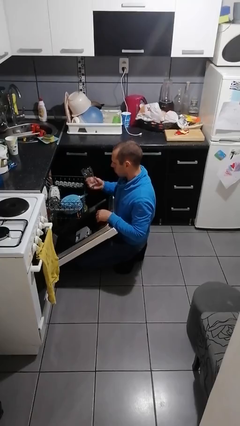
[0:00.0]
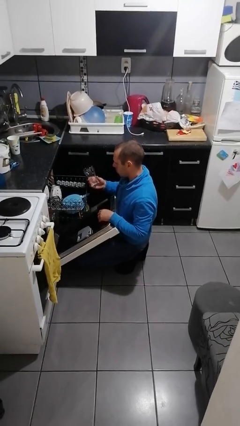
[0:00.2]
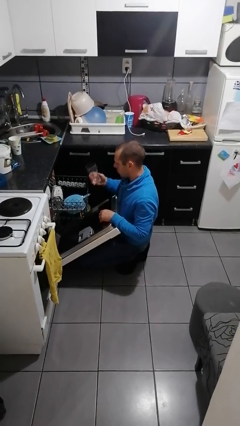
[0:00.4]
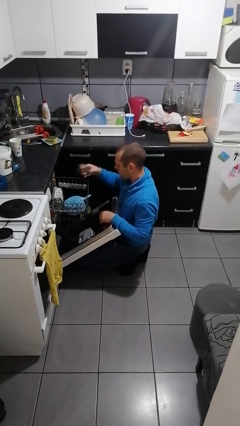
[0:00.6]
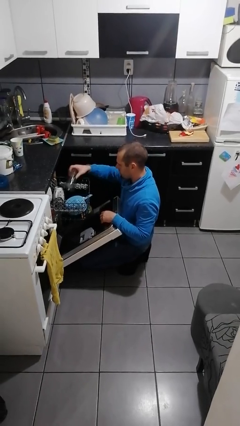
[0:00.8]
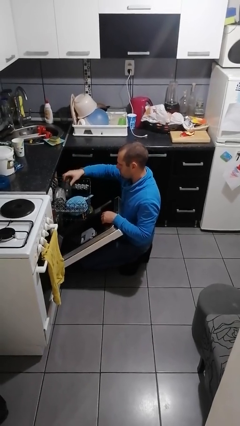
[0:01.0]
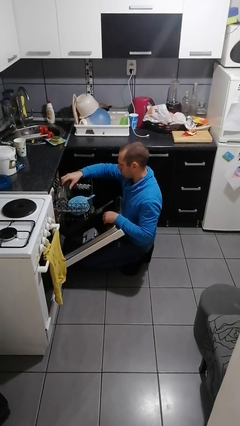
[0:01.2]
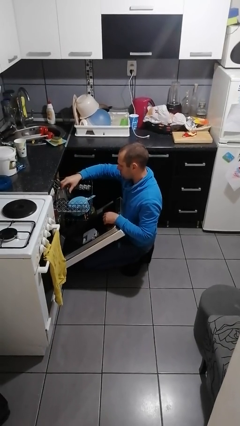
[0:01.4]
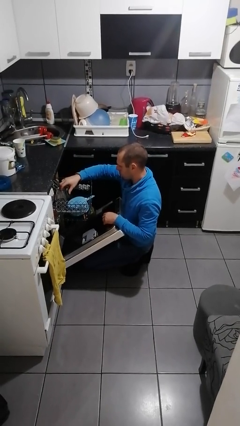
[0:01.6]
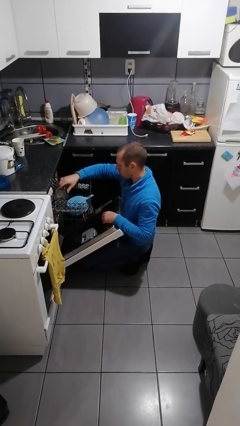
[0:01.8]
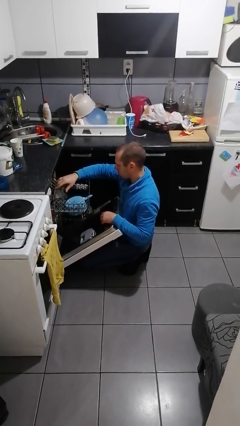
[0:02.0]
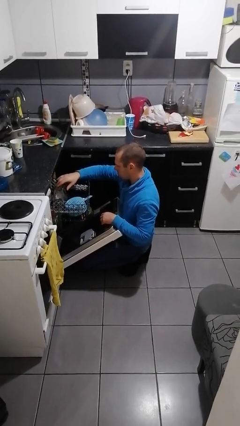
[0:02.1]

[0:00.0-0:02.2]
person loads dishwasher

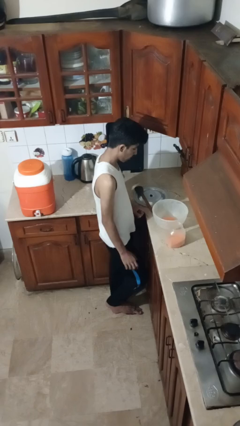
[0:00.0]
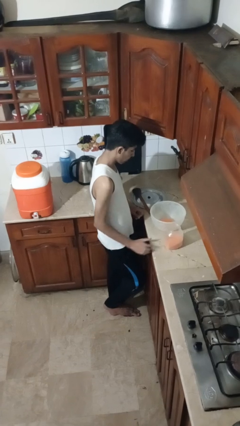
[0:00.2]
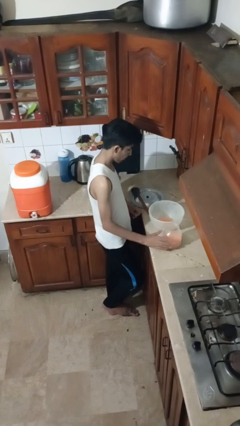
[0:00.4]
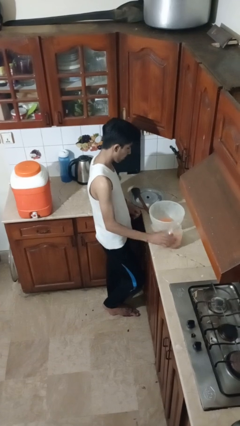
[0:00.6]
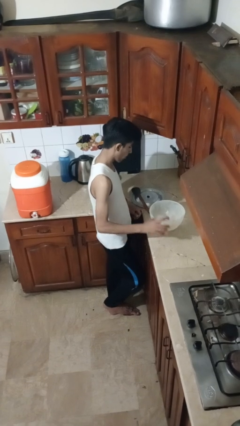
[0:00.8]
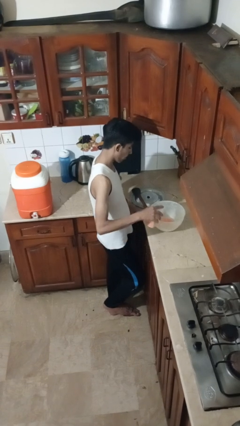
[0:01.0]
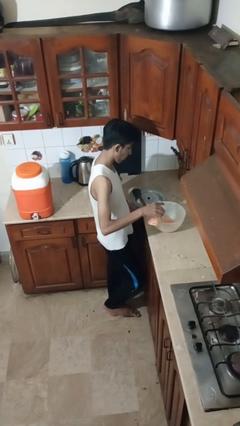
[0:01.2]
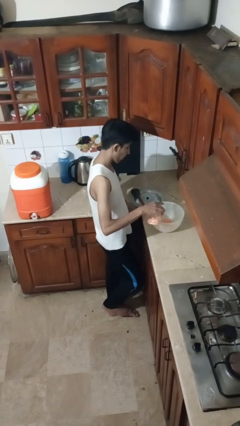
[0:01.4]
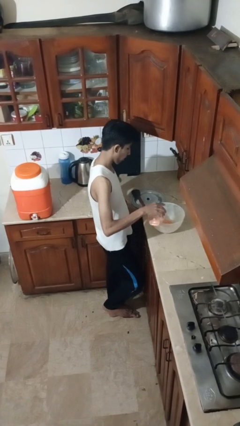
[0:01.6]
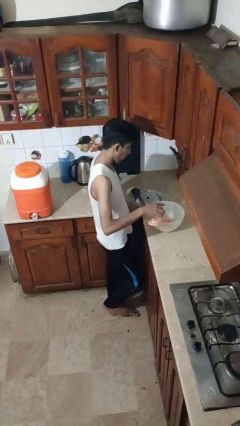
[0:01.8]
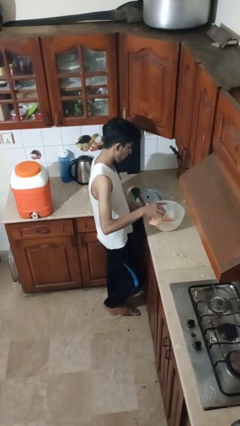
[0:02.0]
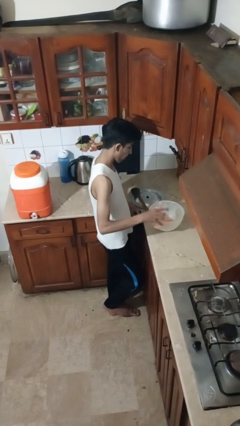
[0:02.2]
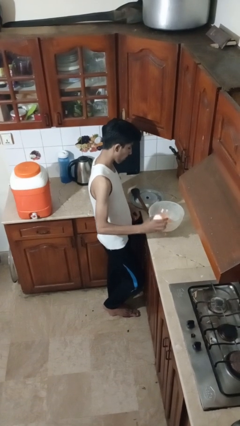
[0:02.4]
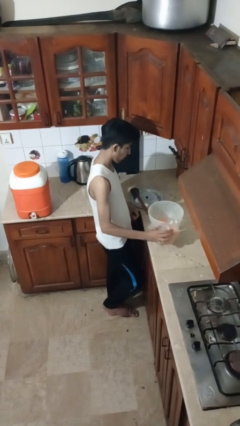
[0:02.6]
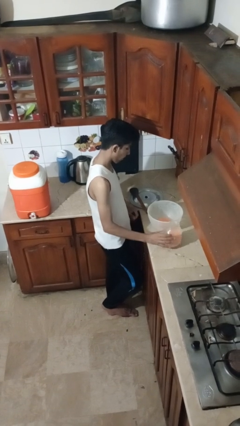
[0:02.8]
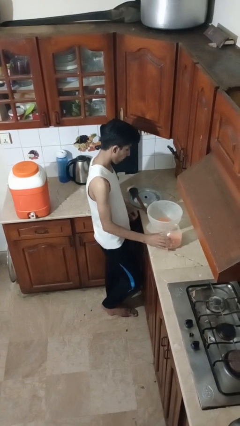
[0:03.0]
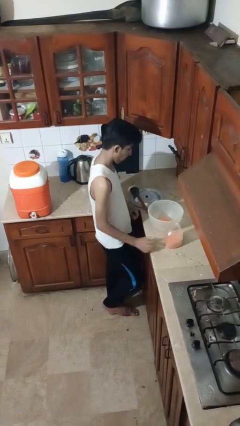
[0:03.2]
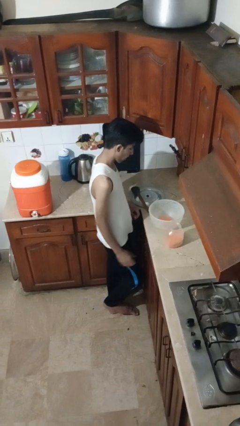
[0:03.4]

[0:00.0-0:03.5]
person pours into bowl

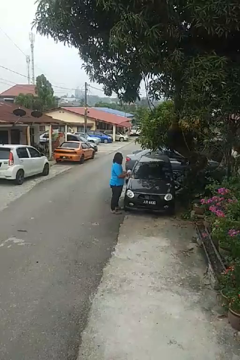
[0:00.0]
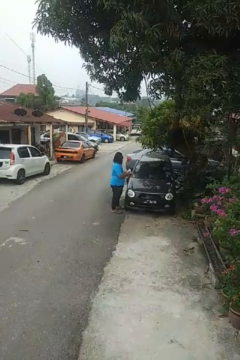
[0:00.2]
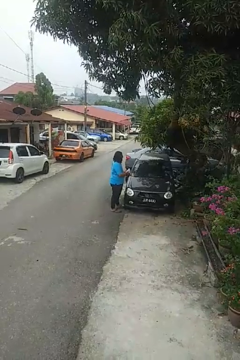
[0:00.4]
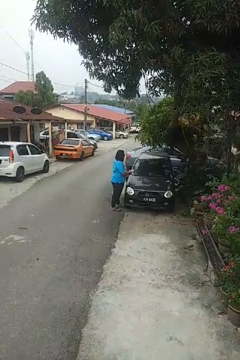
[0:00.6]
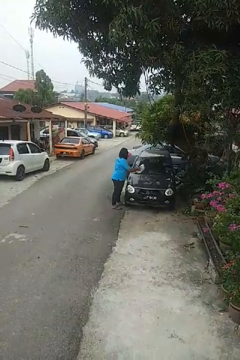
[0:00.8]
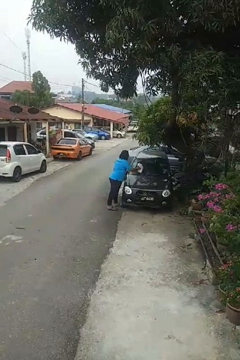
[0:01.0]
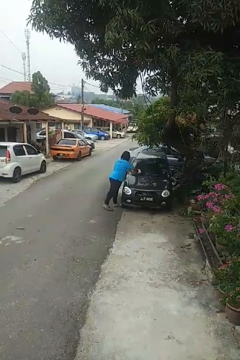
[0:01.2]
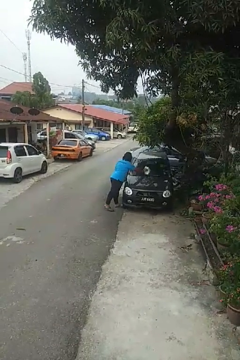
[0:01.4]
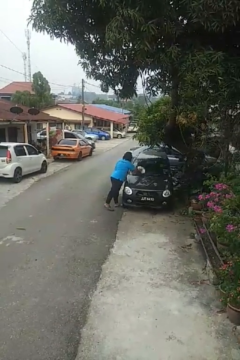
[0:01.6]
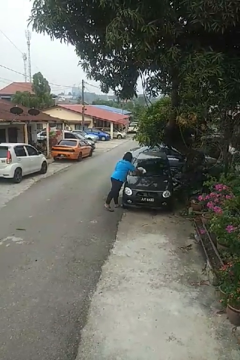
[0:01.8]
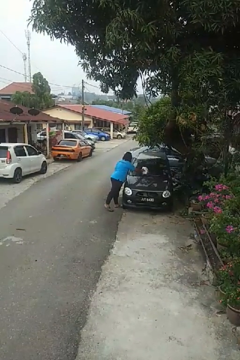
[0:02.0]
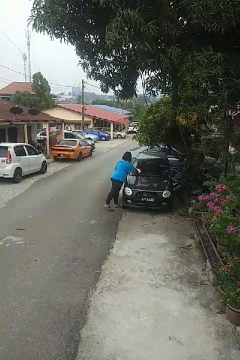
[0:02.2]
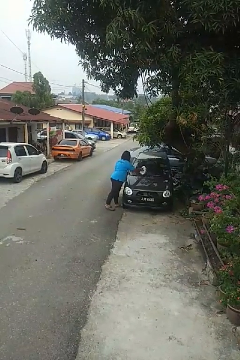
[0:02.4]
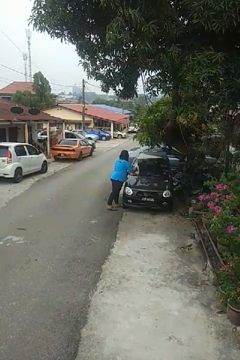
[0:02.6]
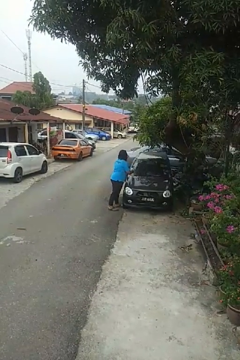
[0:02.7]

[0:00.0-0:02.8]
person polishes car with rag

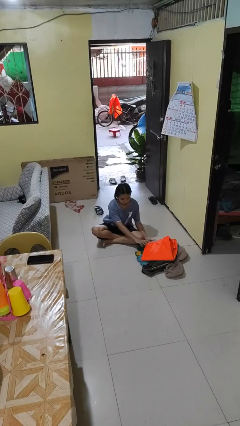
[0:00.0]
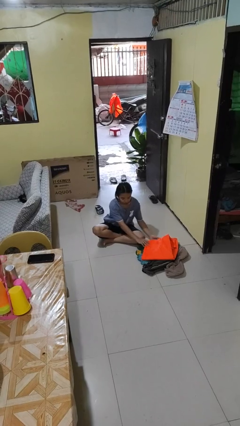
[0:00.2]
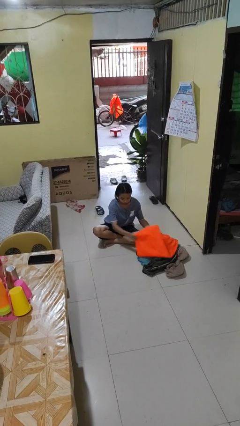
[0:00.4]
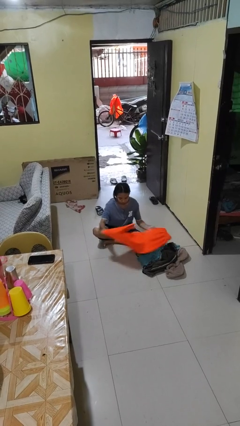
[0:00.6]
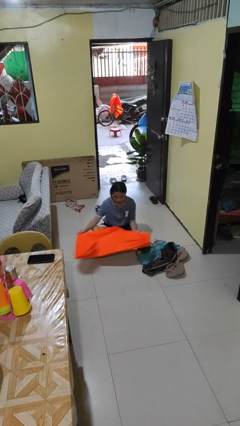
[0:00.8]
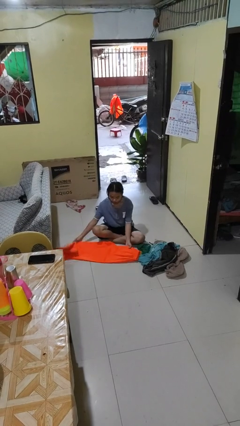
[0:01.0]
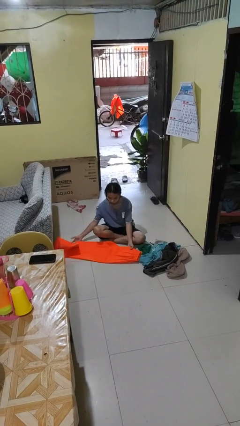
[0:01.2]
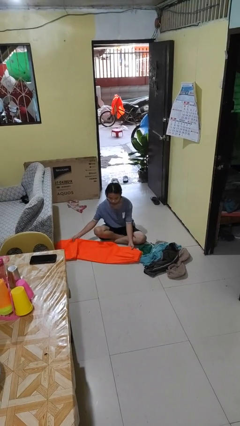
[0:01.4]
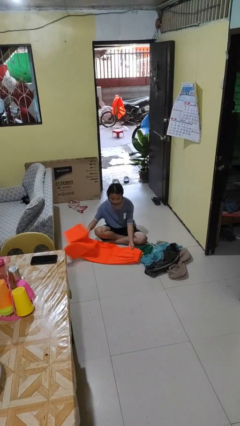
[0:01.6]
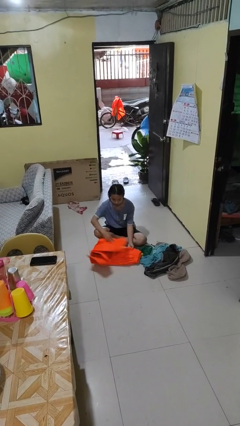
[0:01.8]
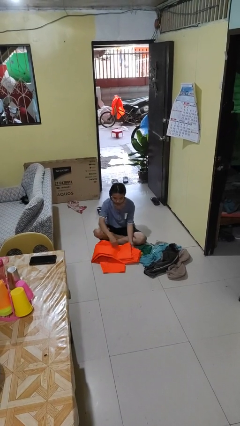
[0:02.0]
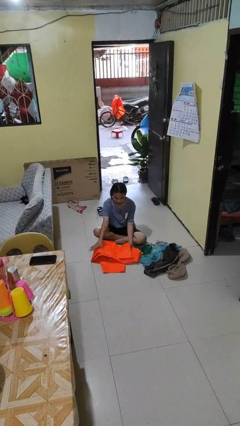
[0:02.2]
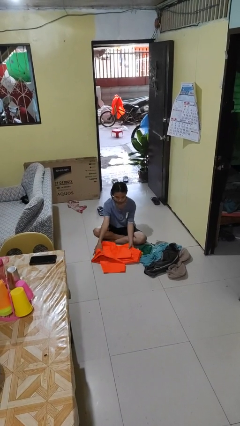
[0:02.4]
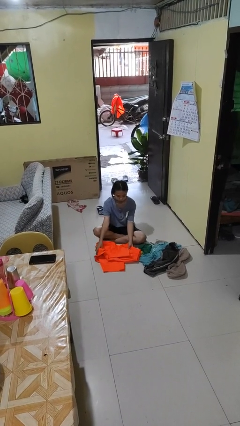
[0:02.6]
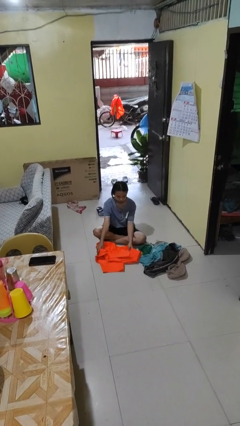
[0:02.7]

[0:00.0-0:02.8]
person folds pants

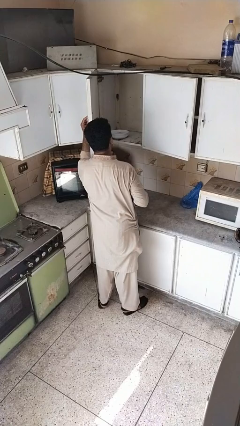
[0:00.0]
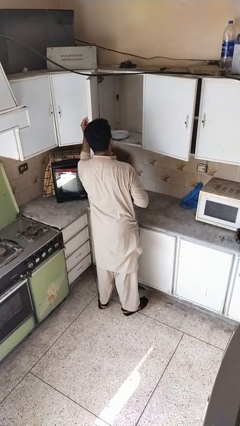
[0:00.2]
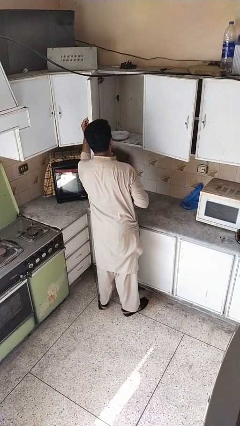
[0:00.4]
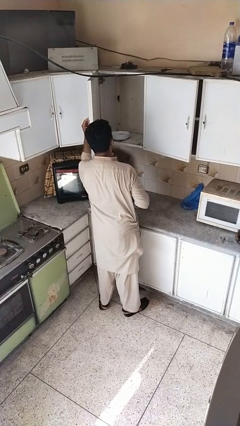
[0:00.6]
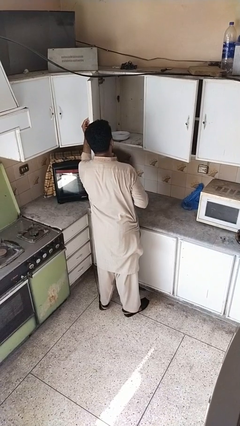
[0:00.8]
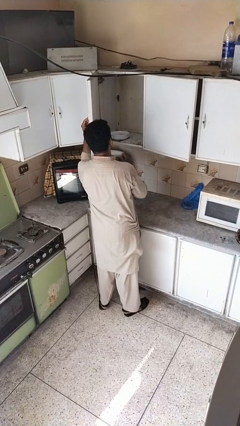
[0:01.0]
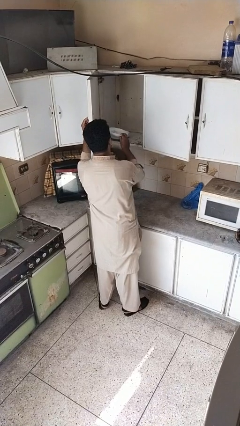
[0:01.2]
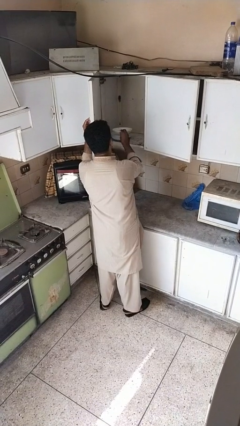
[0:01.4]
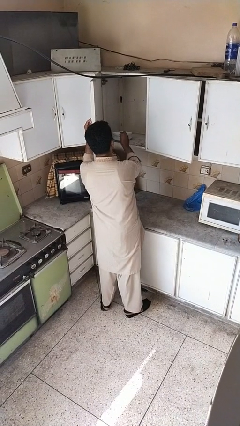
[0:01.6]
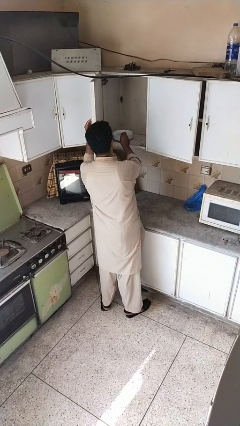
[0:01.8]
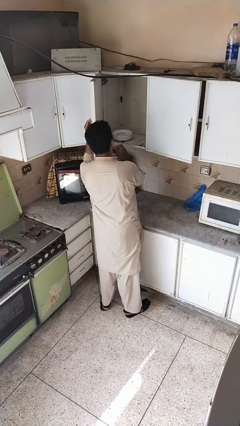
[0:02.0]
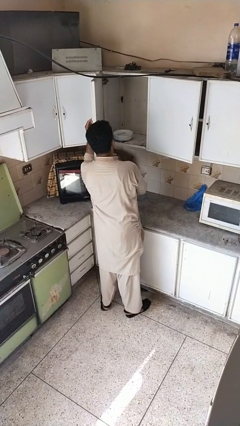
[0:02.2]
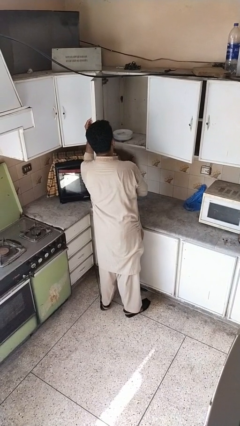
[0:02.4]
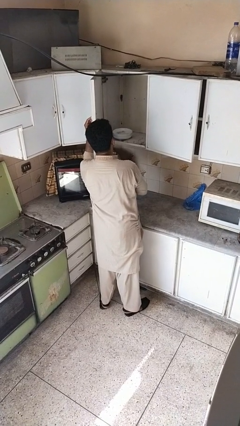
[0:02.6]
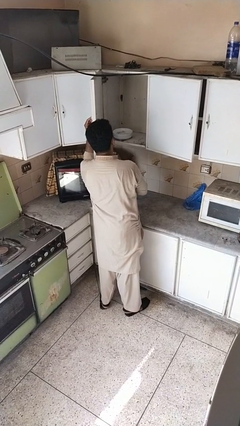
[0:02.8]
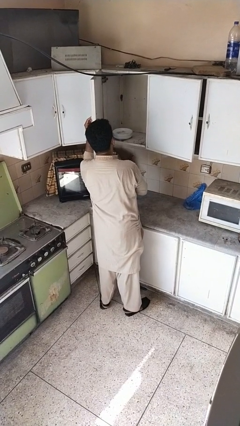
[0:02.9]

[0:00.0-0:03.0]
person puts object in cabinet

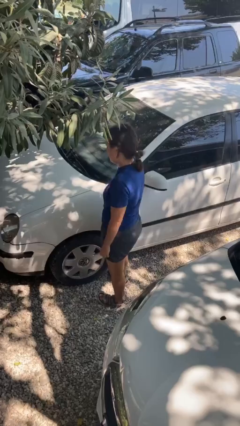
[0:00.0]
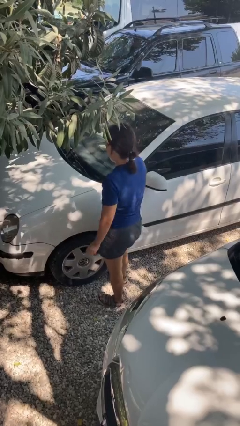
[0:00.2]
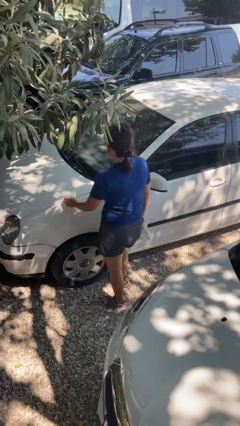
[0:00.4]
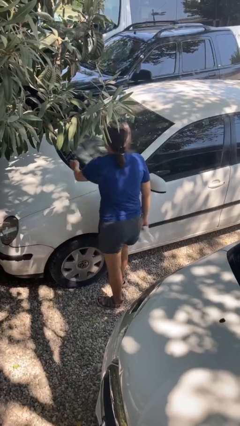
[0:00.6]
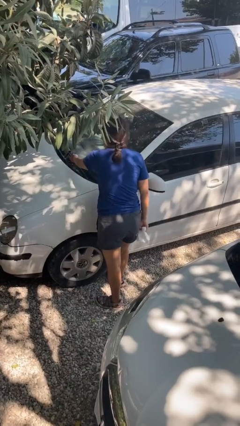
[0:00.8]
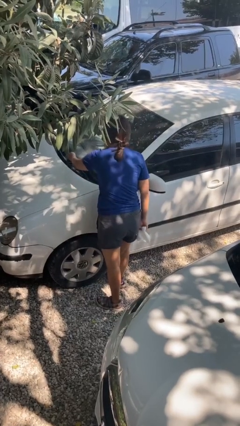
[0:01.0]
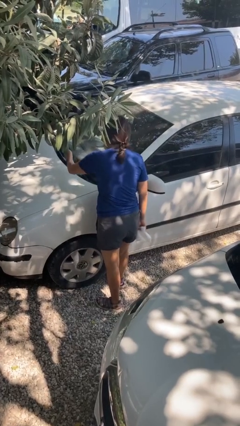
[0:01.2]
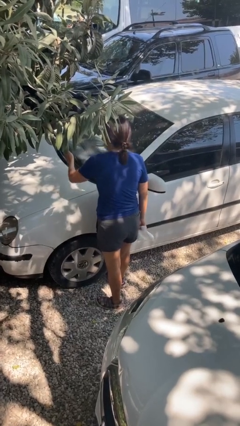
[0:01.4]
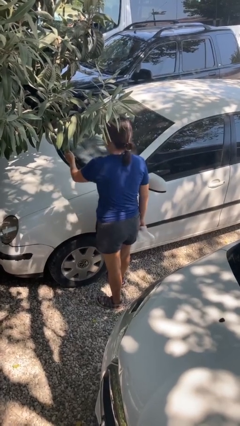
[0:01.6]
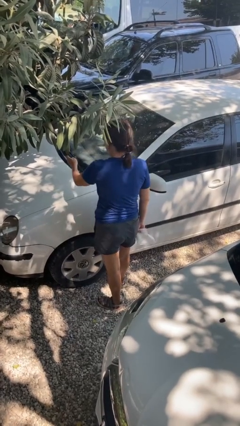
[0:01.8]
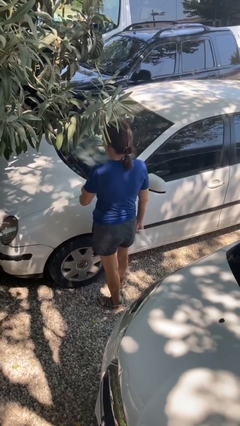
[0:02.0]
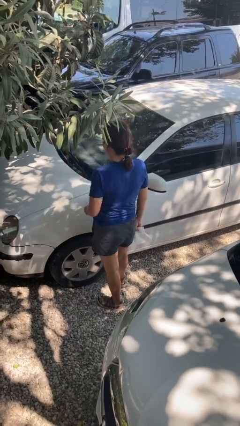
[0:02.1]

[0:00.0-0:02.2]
person flips up car wipers

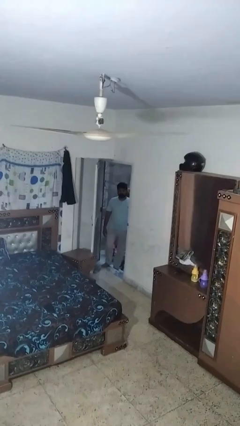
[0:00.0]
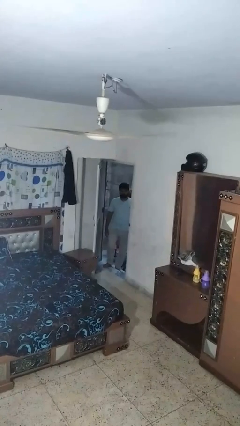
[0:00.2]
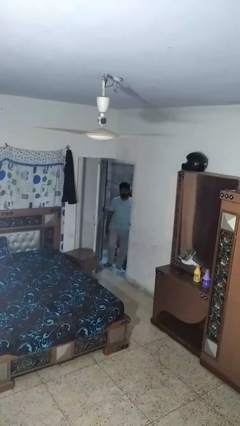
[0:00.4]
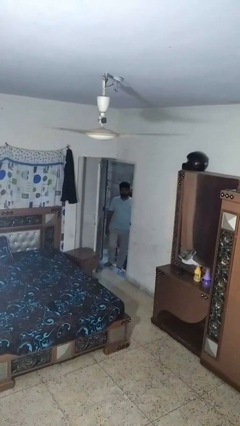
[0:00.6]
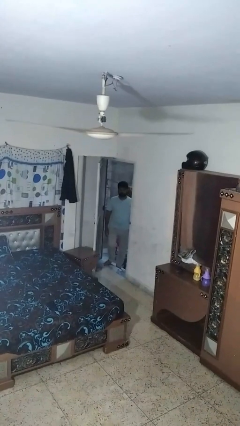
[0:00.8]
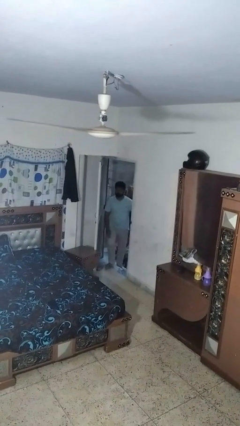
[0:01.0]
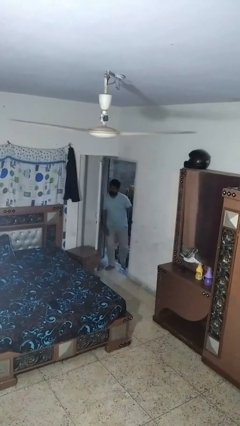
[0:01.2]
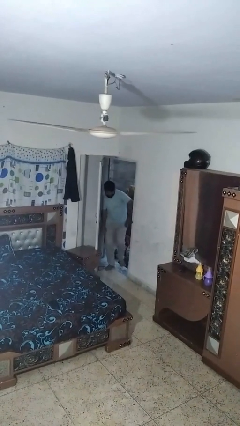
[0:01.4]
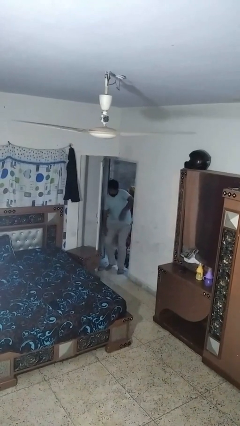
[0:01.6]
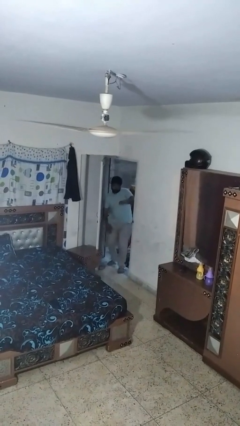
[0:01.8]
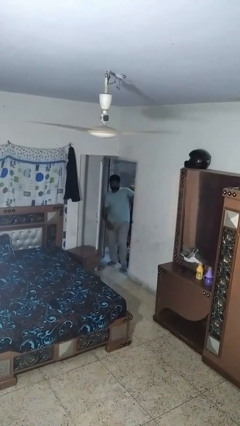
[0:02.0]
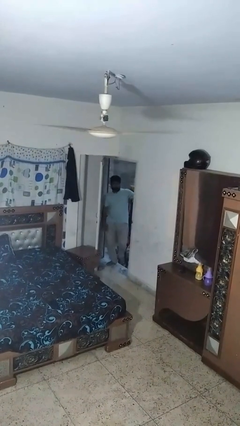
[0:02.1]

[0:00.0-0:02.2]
person bumps into wall
